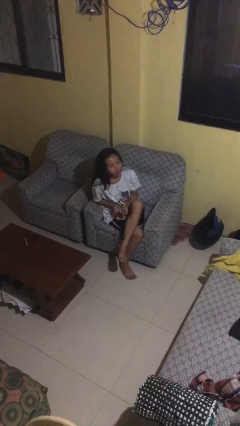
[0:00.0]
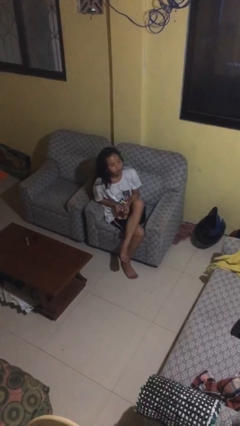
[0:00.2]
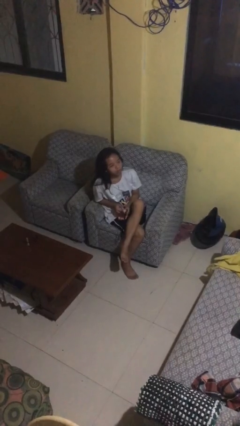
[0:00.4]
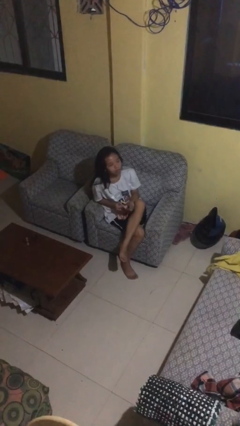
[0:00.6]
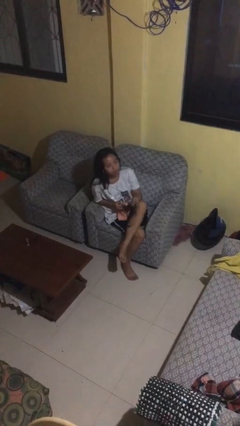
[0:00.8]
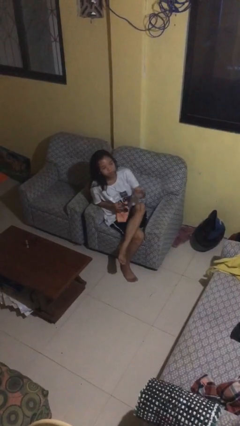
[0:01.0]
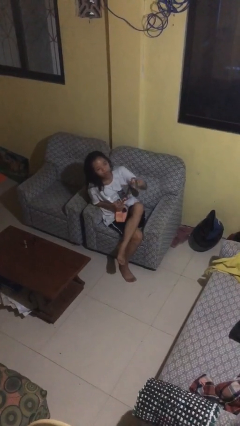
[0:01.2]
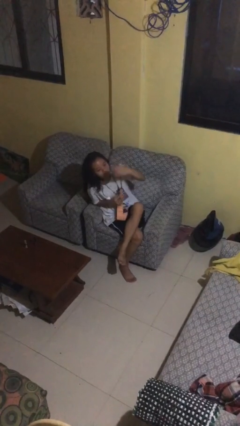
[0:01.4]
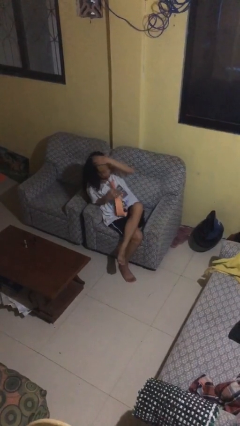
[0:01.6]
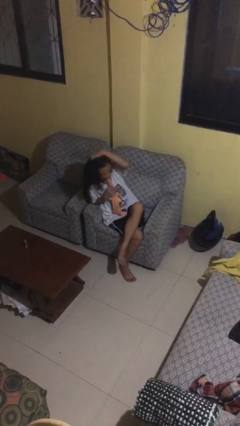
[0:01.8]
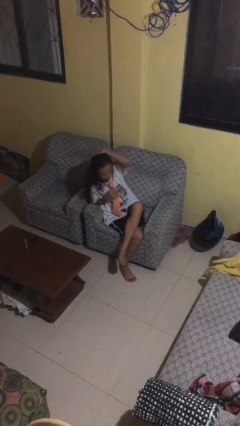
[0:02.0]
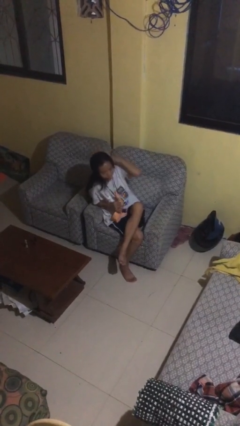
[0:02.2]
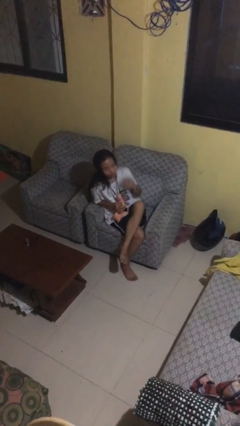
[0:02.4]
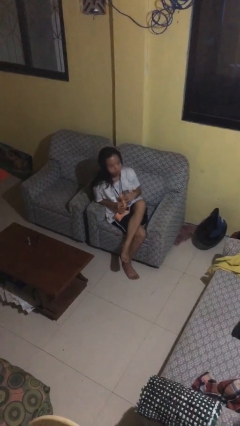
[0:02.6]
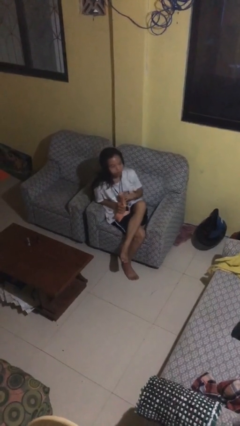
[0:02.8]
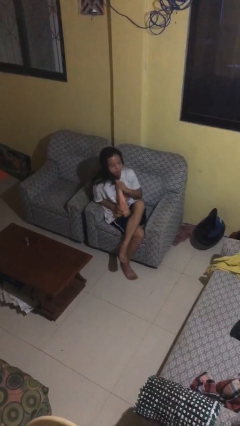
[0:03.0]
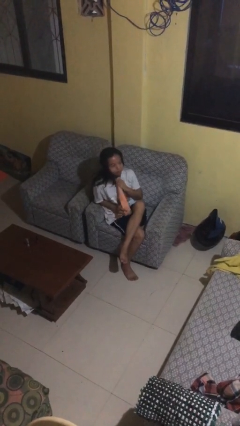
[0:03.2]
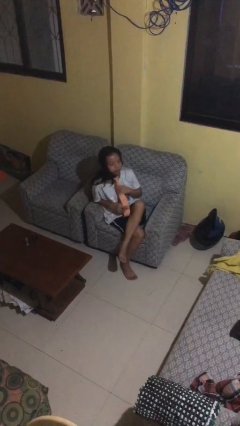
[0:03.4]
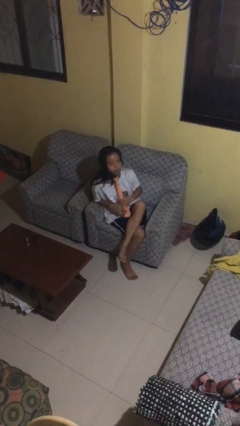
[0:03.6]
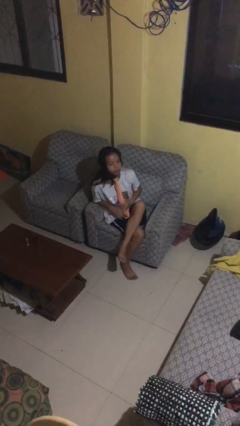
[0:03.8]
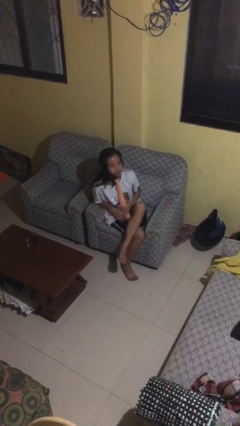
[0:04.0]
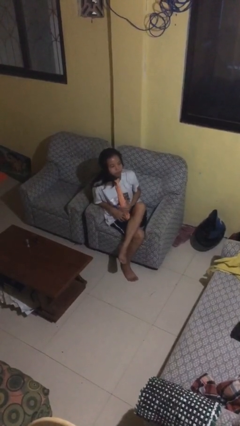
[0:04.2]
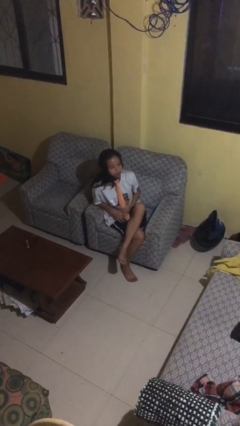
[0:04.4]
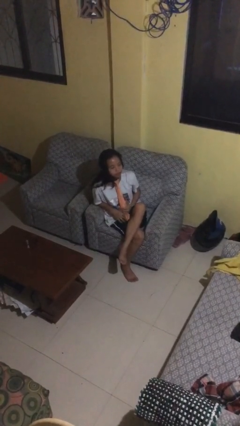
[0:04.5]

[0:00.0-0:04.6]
person puts on necktie

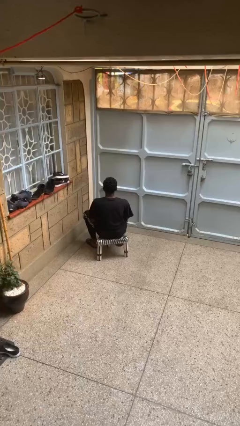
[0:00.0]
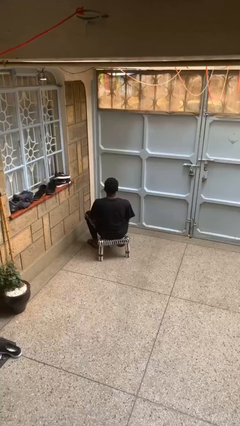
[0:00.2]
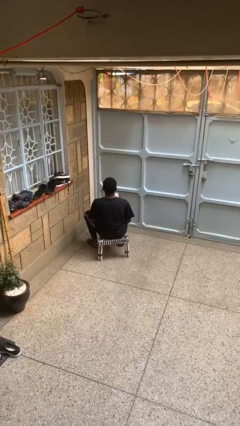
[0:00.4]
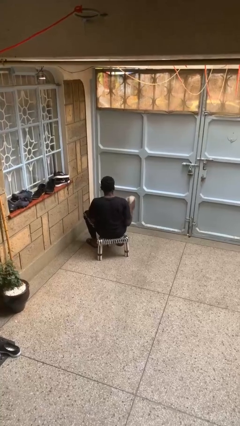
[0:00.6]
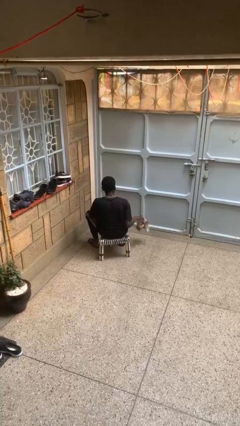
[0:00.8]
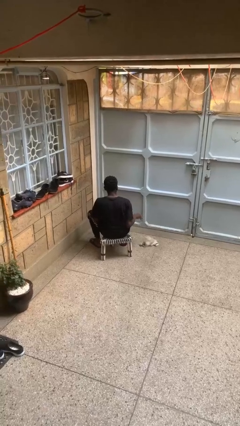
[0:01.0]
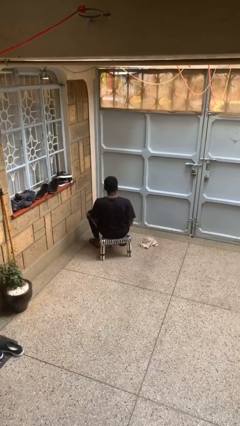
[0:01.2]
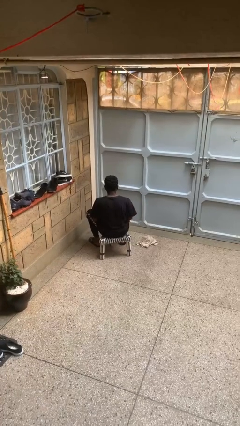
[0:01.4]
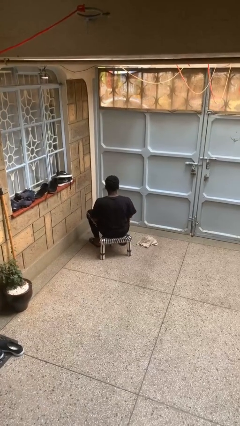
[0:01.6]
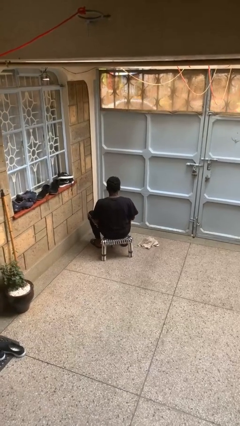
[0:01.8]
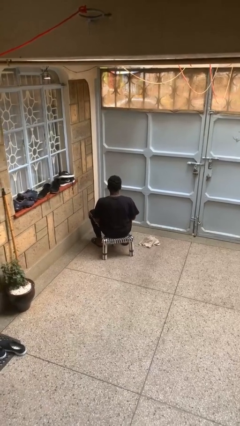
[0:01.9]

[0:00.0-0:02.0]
person throws object to ground

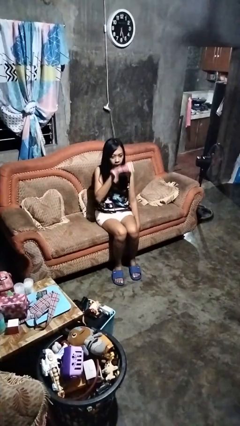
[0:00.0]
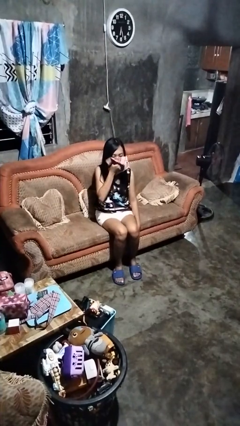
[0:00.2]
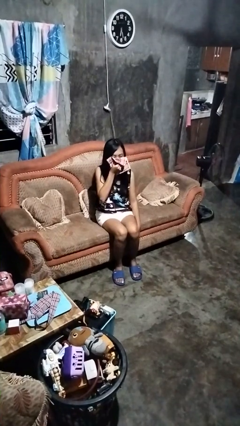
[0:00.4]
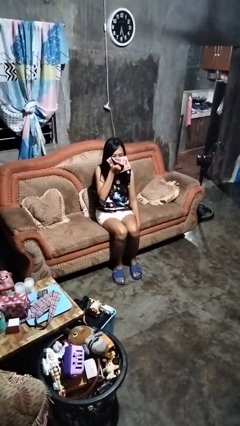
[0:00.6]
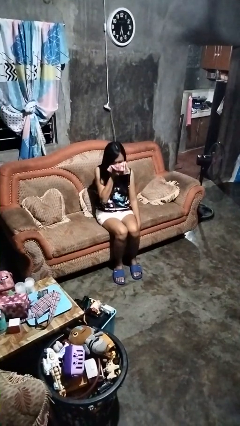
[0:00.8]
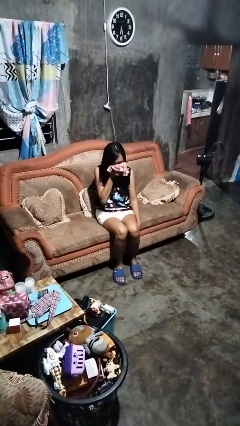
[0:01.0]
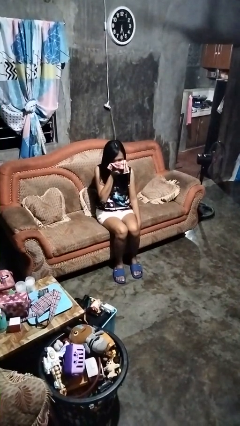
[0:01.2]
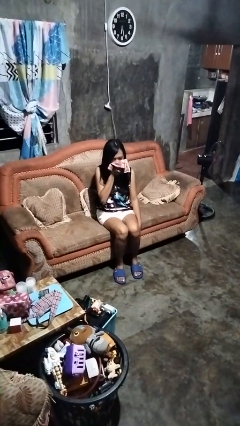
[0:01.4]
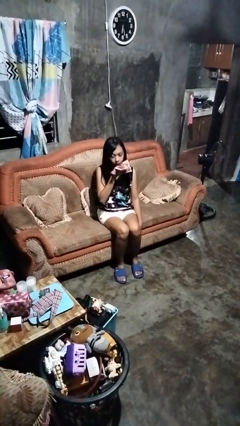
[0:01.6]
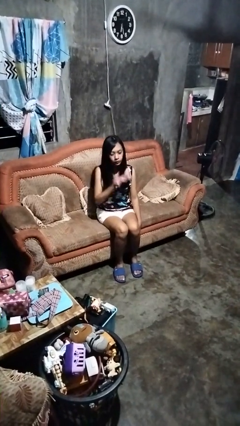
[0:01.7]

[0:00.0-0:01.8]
person blows nose

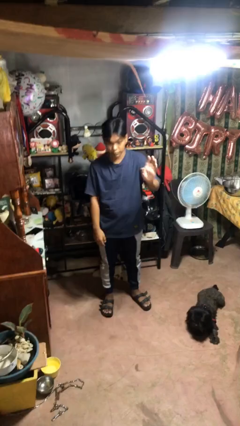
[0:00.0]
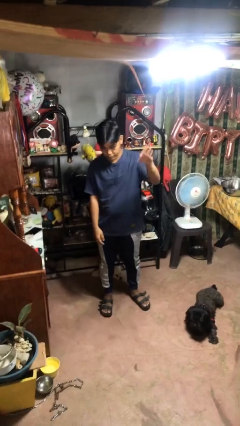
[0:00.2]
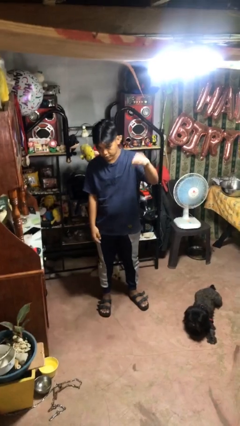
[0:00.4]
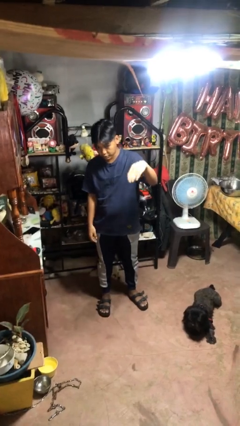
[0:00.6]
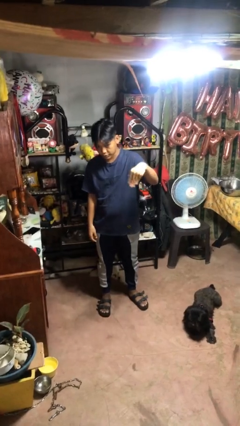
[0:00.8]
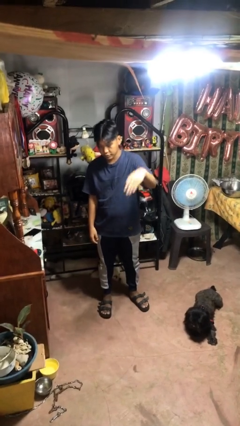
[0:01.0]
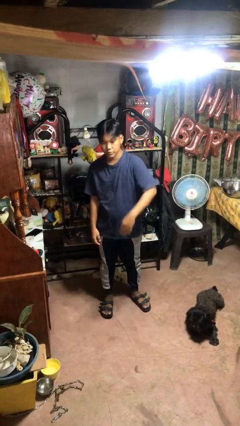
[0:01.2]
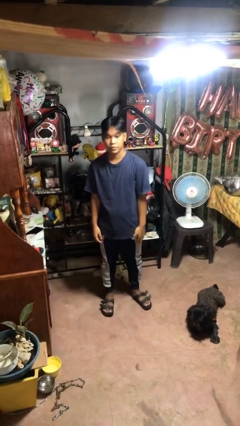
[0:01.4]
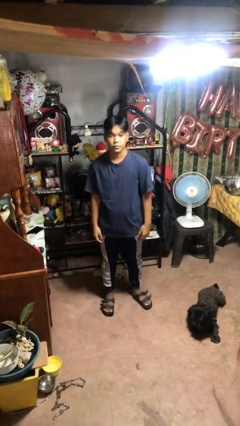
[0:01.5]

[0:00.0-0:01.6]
person gestures come here

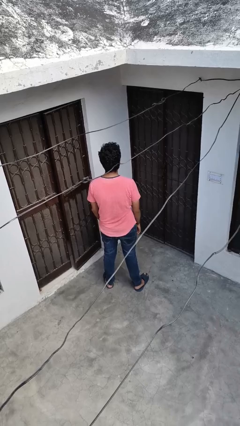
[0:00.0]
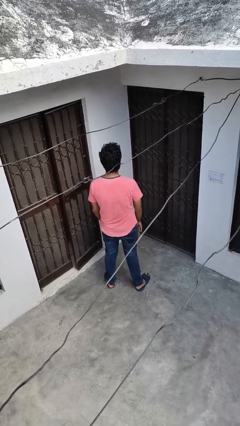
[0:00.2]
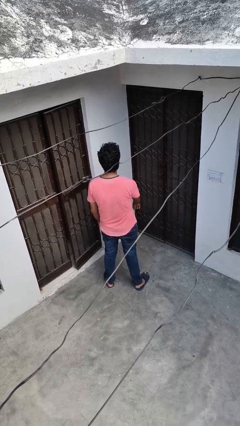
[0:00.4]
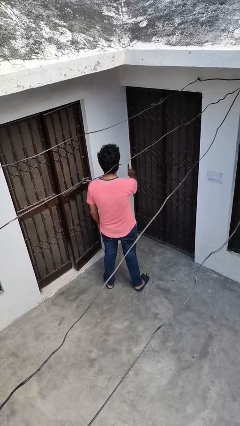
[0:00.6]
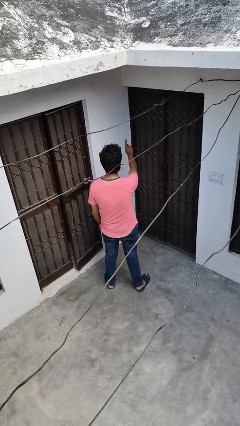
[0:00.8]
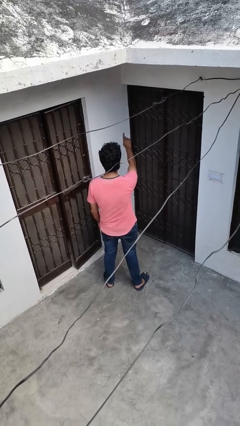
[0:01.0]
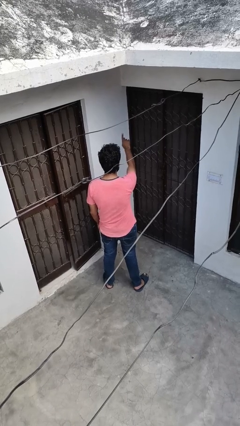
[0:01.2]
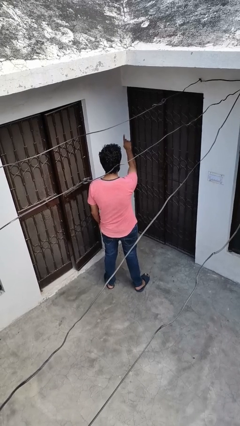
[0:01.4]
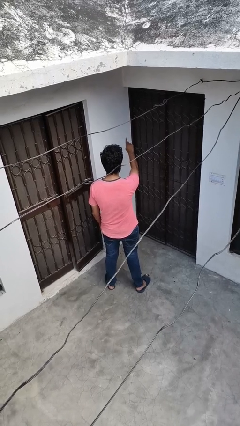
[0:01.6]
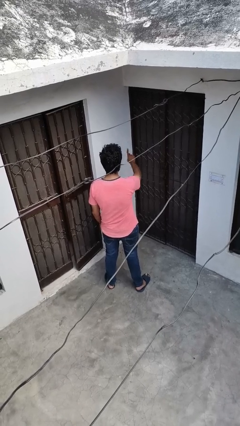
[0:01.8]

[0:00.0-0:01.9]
person gestures number one

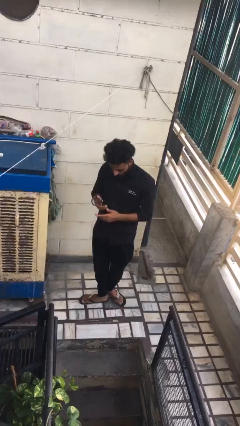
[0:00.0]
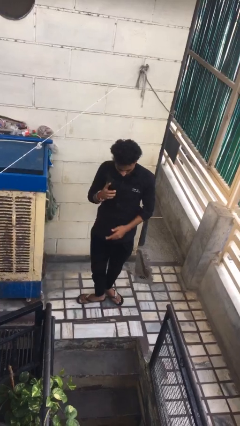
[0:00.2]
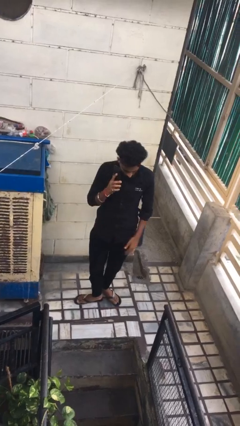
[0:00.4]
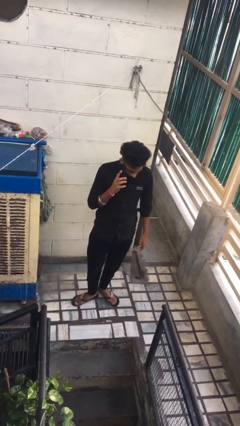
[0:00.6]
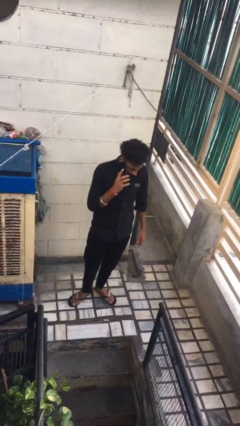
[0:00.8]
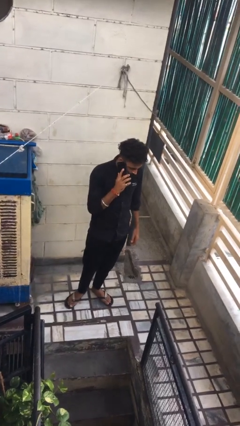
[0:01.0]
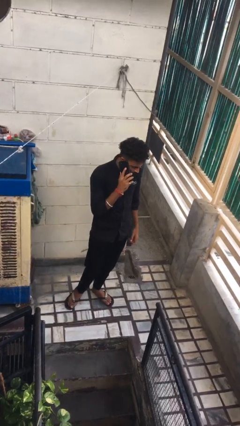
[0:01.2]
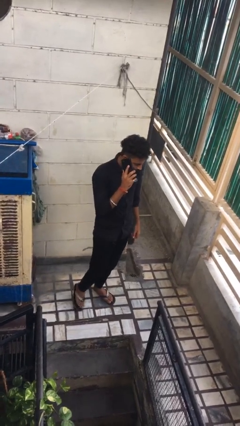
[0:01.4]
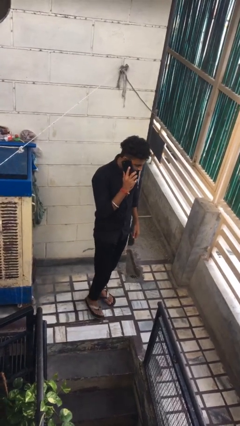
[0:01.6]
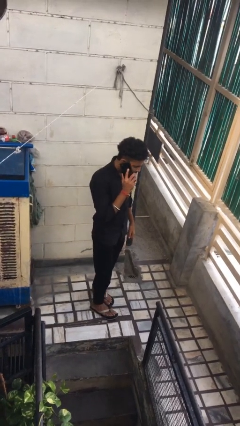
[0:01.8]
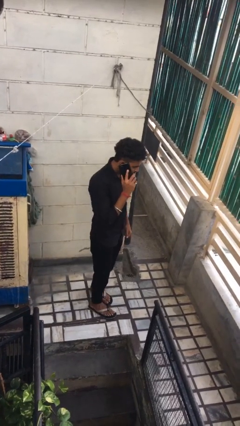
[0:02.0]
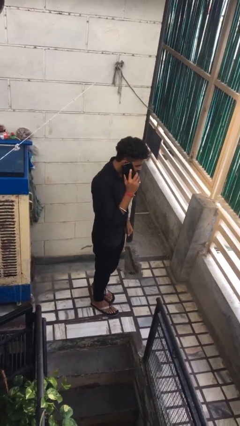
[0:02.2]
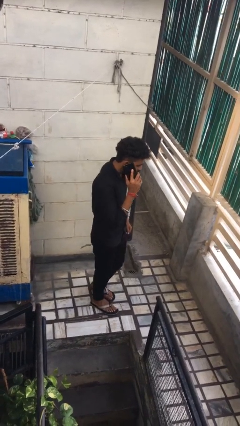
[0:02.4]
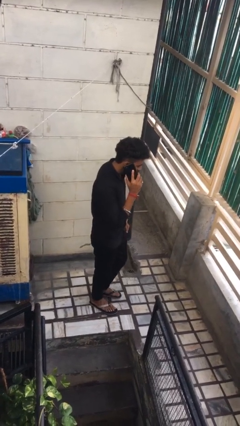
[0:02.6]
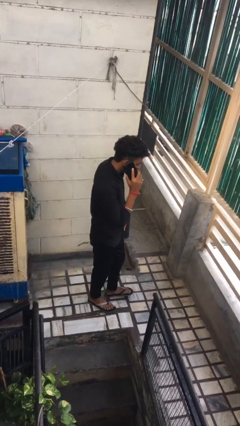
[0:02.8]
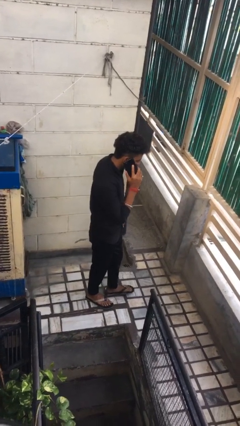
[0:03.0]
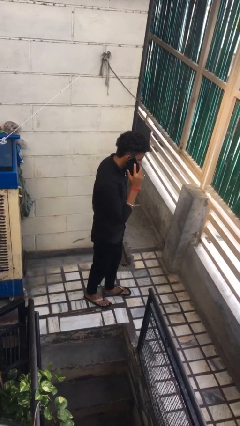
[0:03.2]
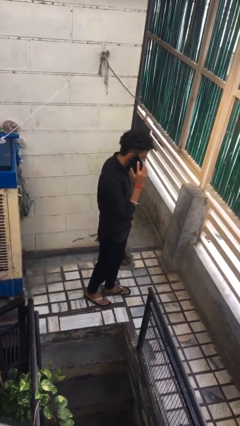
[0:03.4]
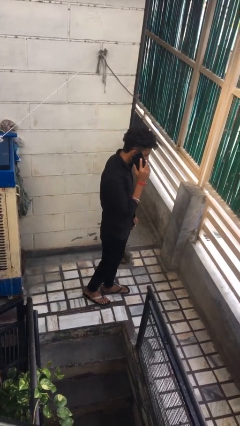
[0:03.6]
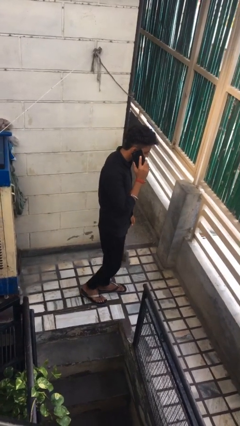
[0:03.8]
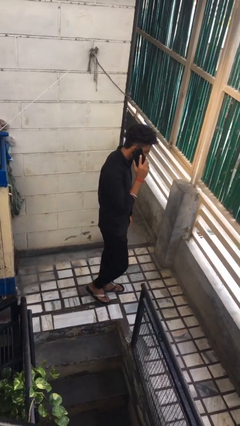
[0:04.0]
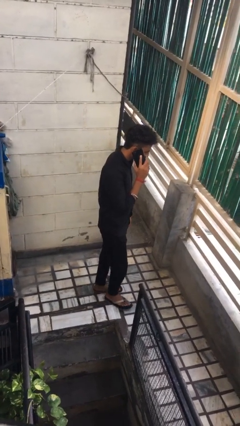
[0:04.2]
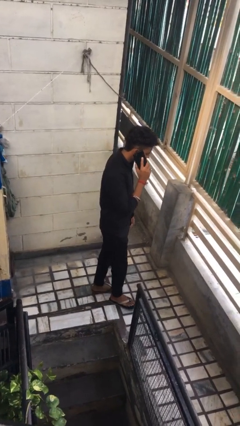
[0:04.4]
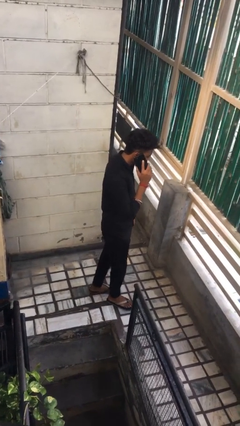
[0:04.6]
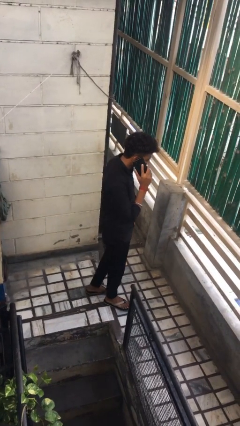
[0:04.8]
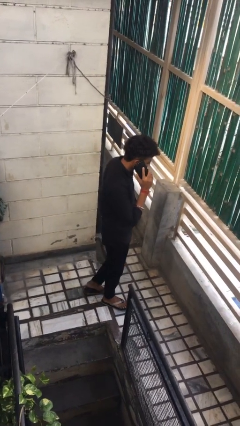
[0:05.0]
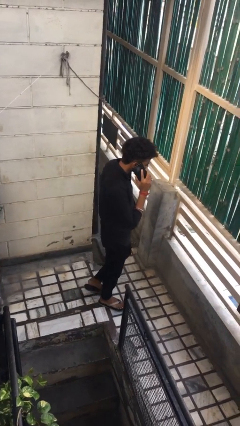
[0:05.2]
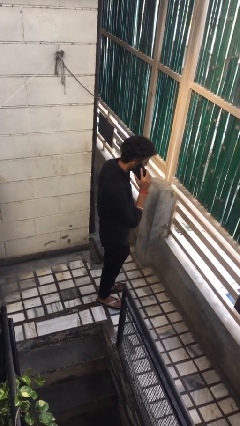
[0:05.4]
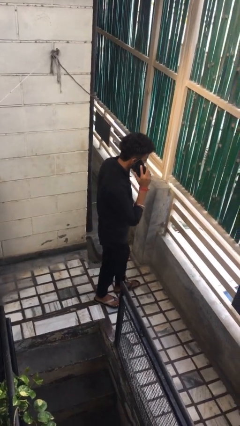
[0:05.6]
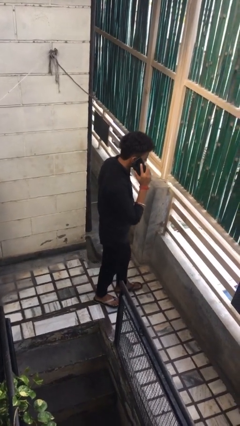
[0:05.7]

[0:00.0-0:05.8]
person talks on phone
